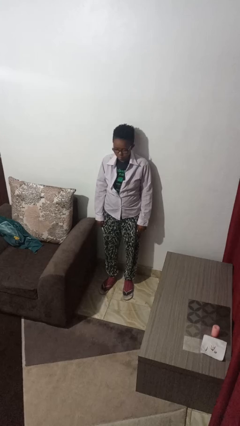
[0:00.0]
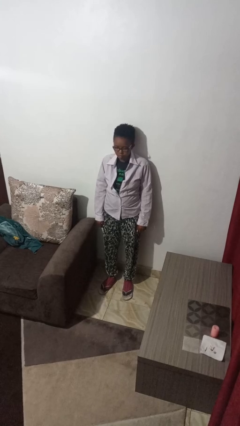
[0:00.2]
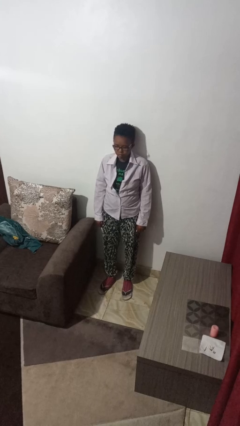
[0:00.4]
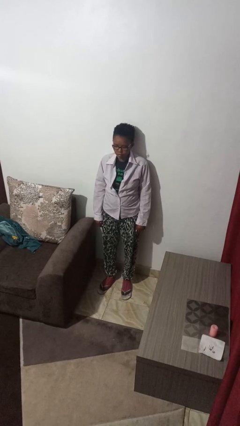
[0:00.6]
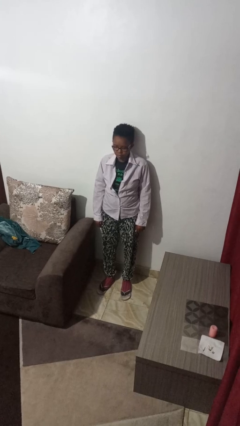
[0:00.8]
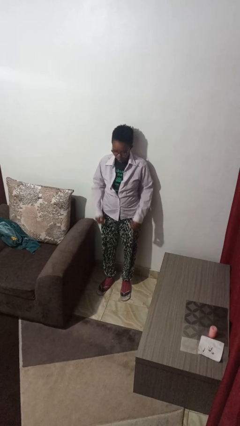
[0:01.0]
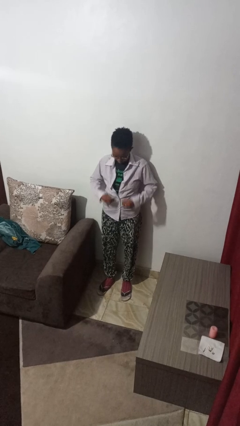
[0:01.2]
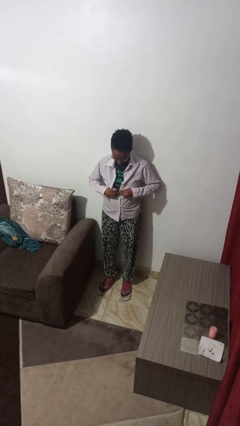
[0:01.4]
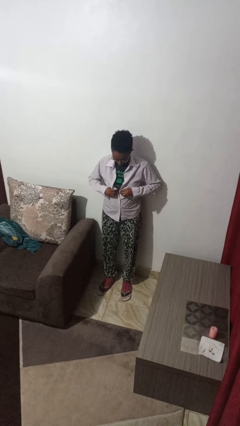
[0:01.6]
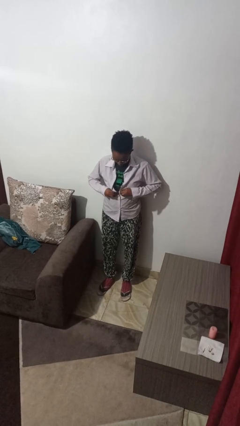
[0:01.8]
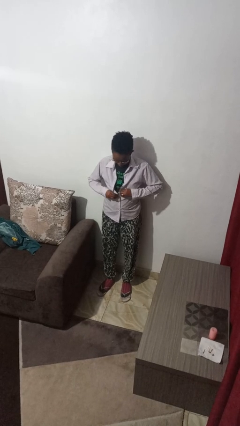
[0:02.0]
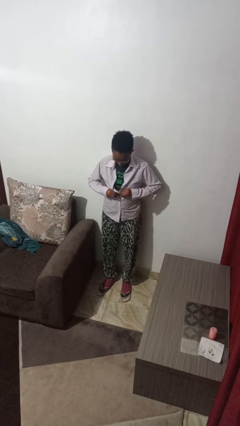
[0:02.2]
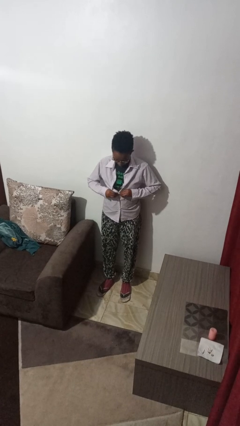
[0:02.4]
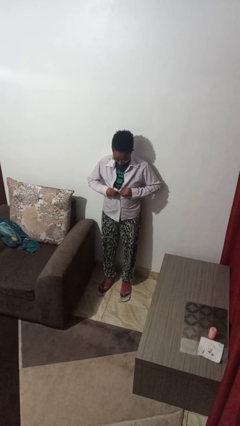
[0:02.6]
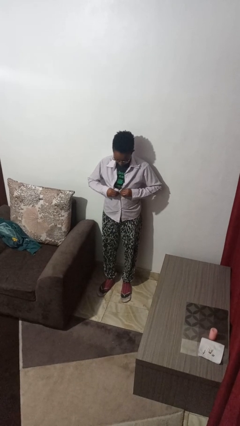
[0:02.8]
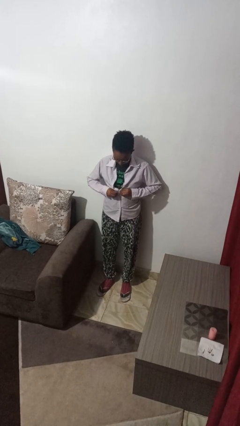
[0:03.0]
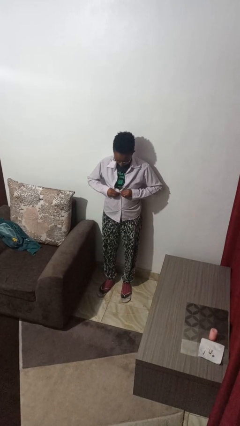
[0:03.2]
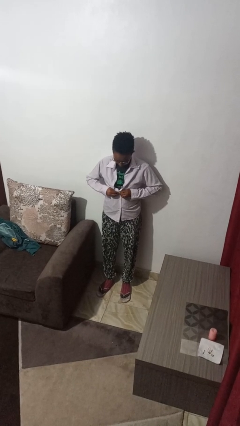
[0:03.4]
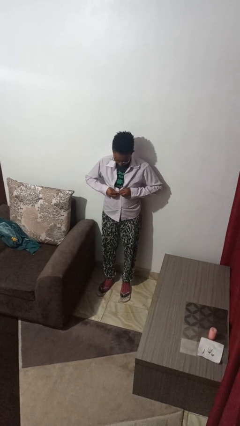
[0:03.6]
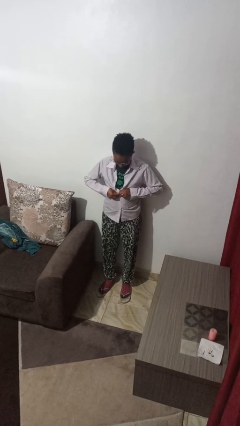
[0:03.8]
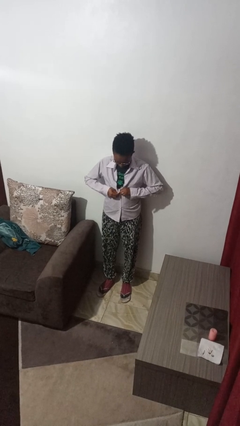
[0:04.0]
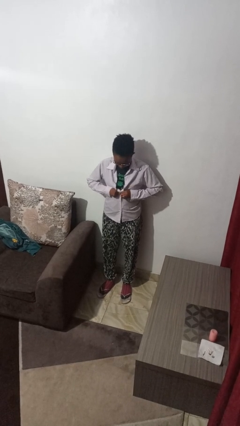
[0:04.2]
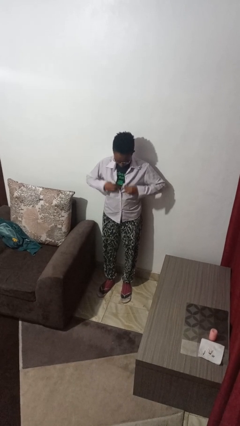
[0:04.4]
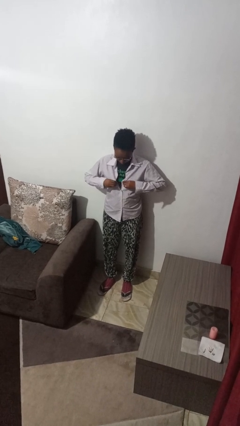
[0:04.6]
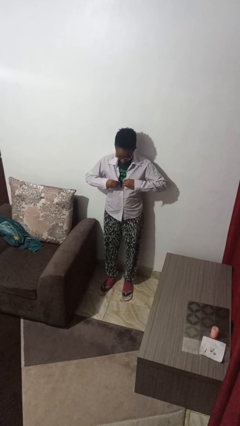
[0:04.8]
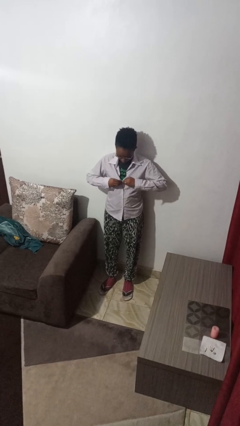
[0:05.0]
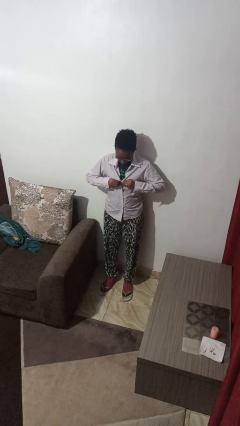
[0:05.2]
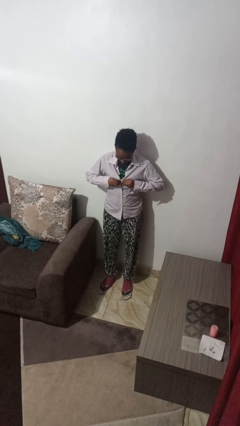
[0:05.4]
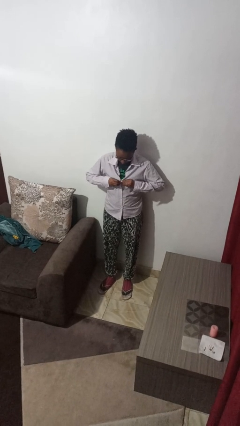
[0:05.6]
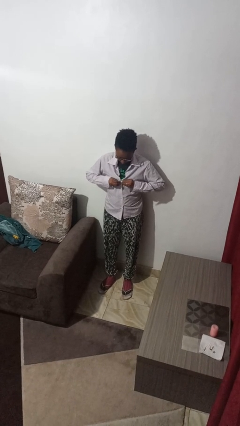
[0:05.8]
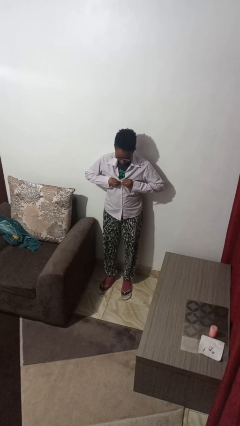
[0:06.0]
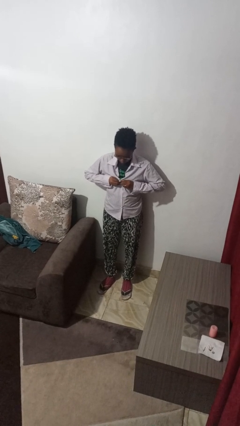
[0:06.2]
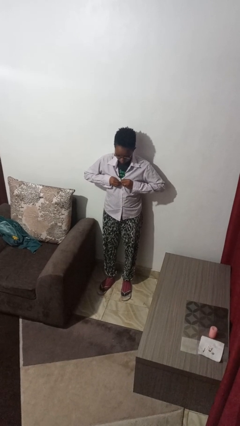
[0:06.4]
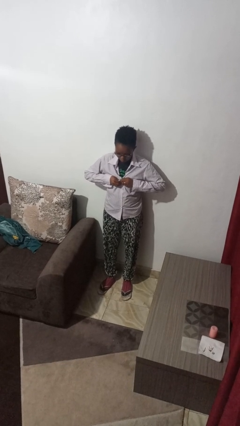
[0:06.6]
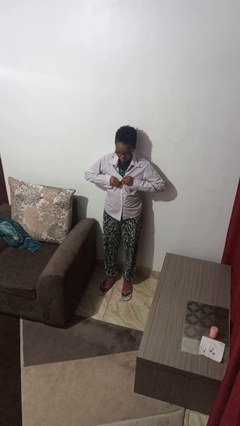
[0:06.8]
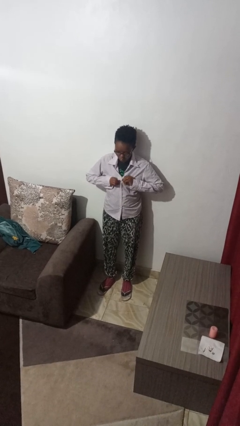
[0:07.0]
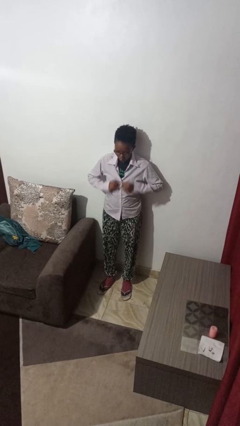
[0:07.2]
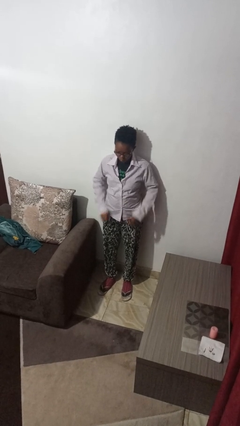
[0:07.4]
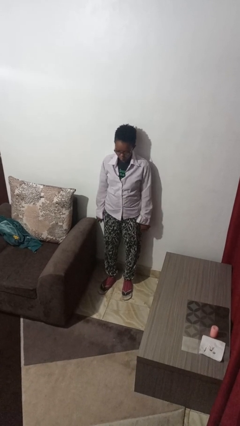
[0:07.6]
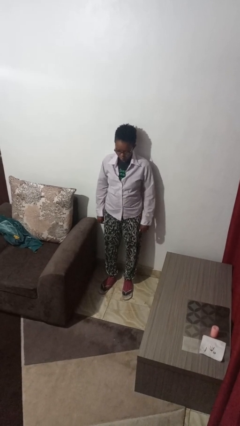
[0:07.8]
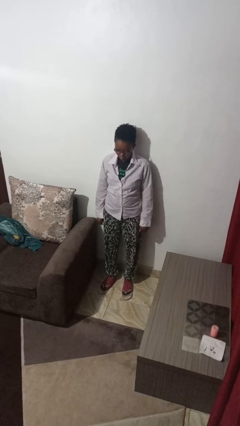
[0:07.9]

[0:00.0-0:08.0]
person buttons shirt

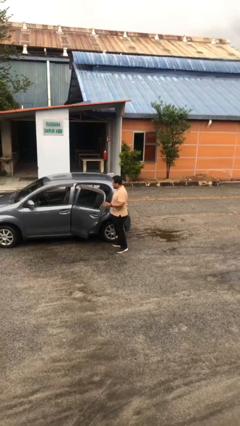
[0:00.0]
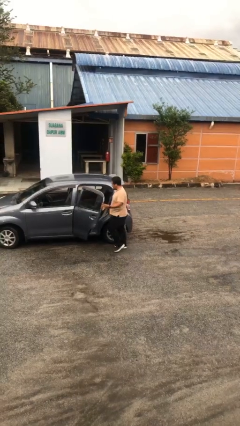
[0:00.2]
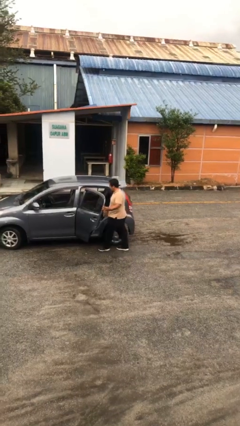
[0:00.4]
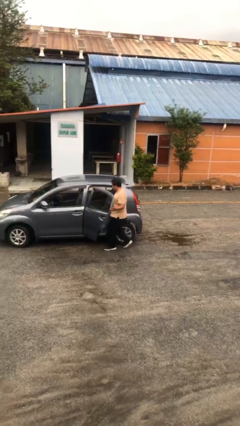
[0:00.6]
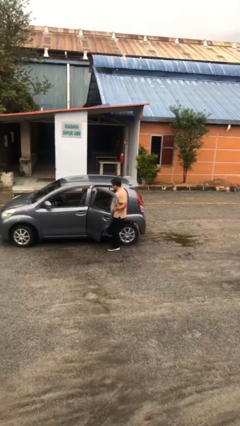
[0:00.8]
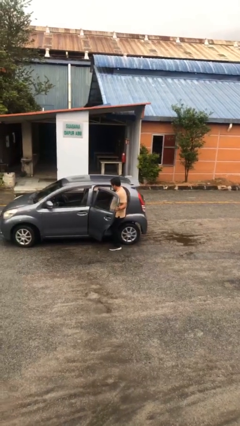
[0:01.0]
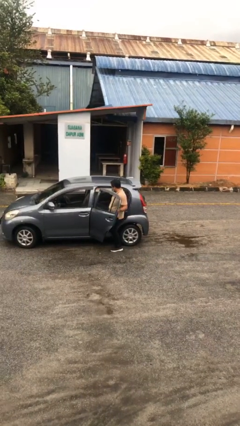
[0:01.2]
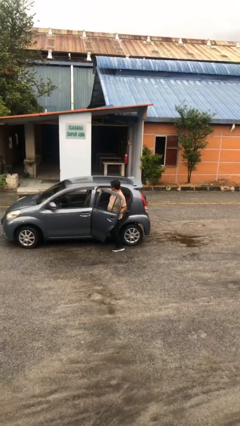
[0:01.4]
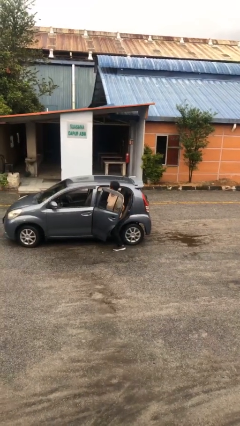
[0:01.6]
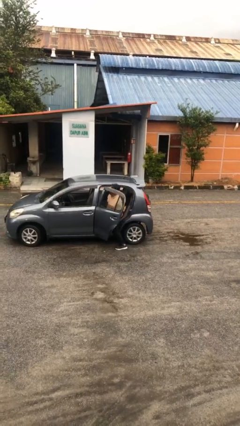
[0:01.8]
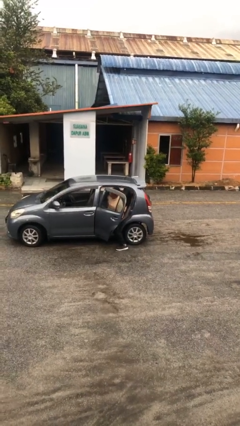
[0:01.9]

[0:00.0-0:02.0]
person enters car

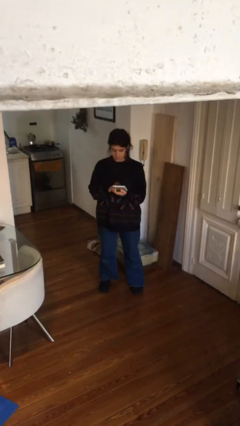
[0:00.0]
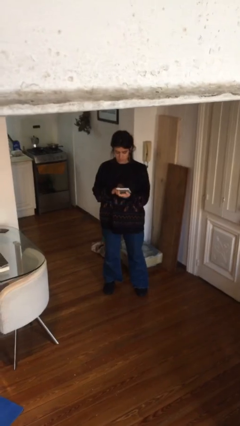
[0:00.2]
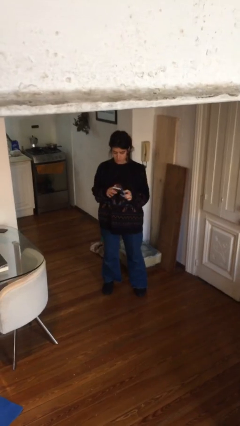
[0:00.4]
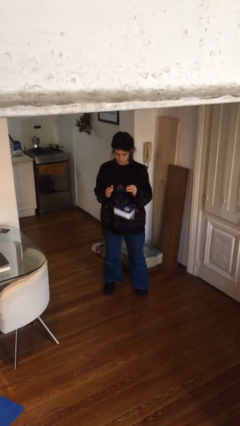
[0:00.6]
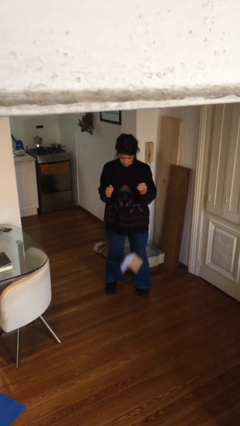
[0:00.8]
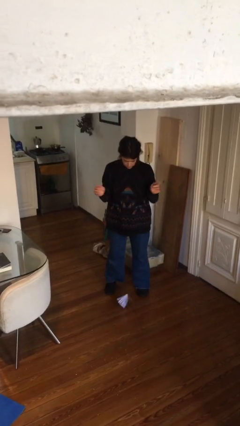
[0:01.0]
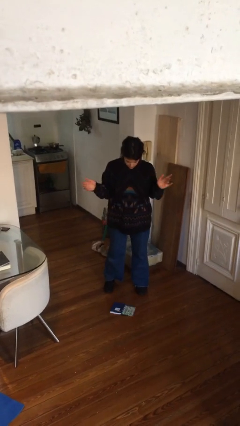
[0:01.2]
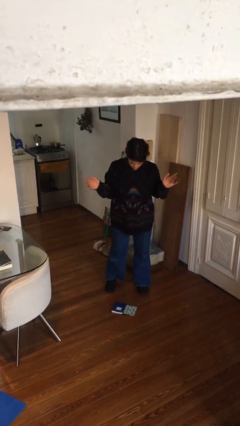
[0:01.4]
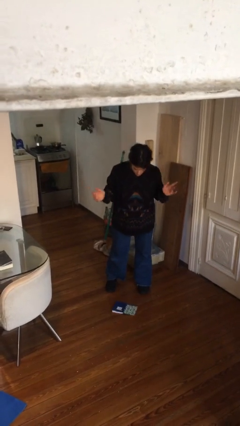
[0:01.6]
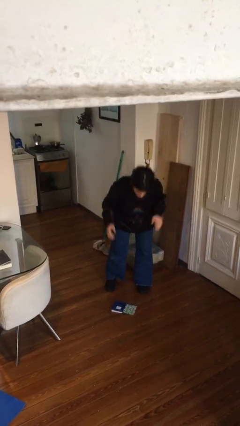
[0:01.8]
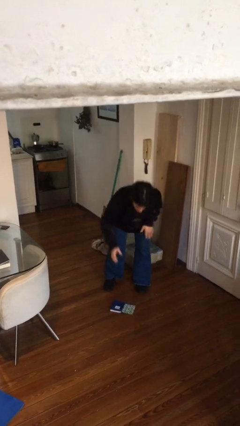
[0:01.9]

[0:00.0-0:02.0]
person drops object

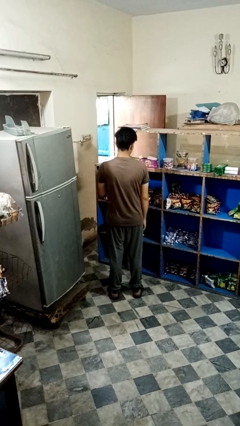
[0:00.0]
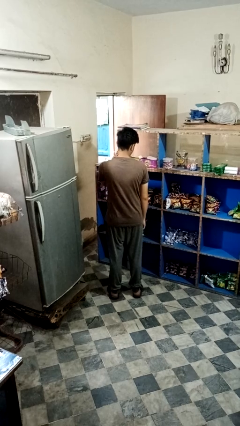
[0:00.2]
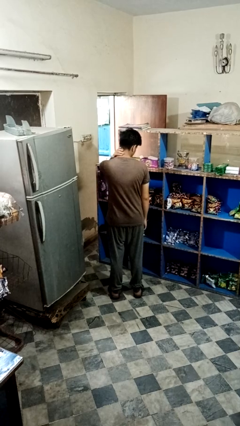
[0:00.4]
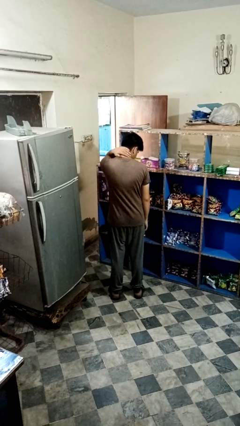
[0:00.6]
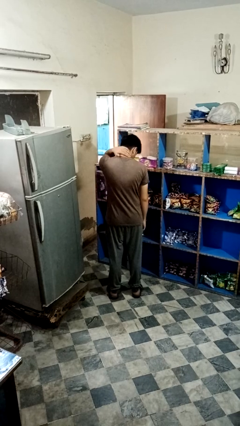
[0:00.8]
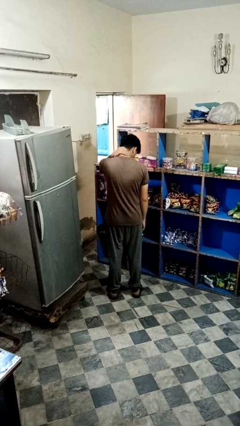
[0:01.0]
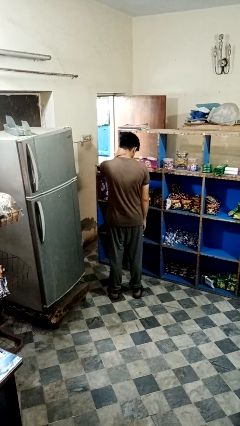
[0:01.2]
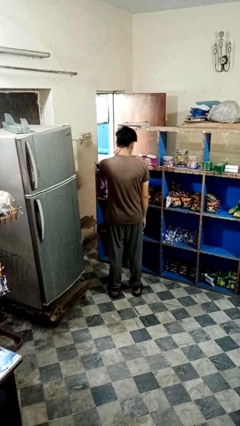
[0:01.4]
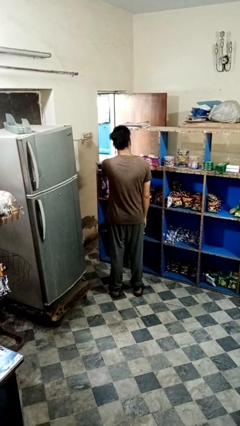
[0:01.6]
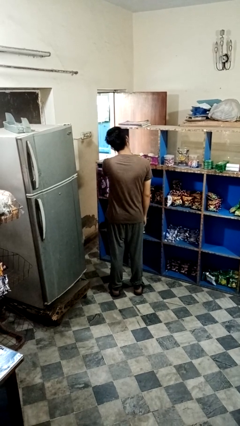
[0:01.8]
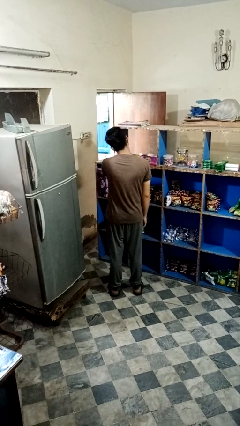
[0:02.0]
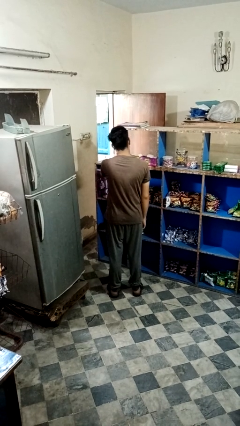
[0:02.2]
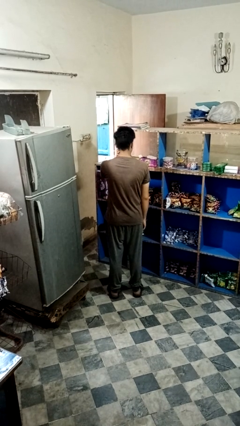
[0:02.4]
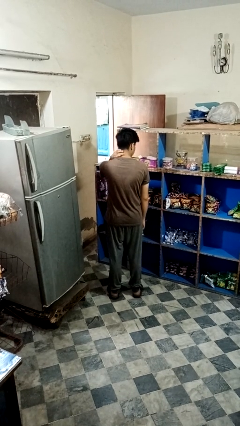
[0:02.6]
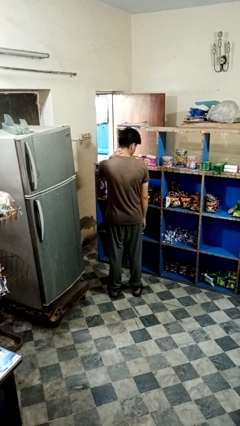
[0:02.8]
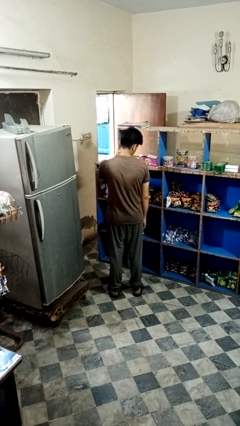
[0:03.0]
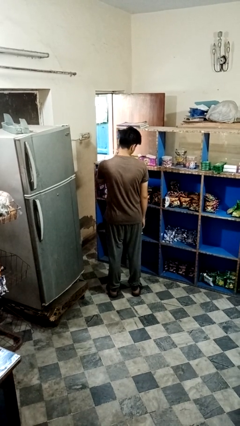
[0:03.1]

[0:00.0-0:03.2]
person rubs neck

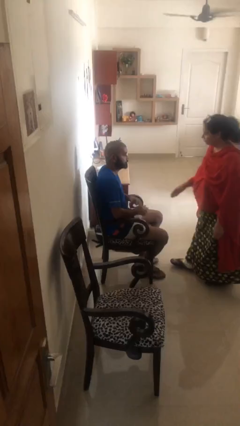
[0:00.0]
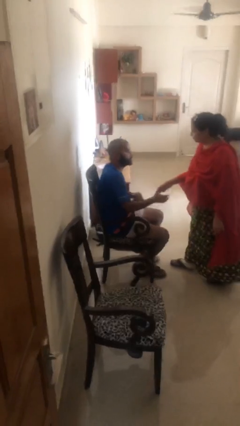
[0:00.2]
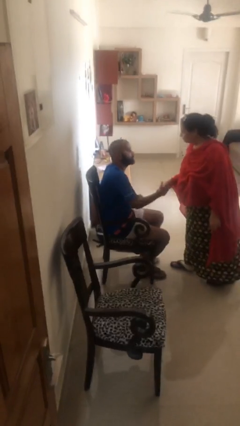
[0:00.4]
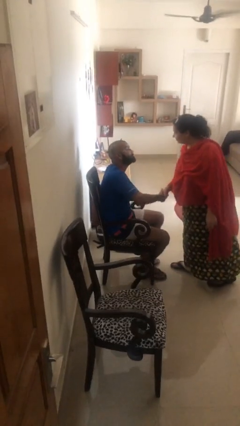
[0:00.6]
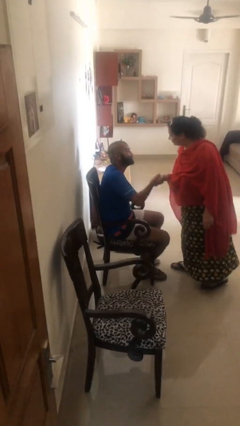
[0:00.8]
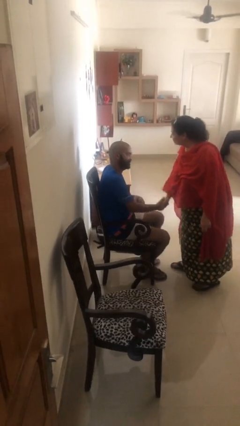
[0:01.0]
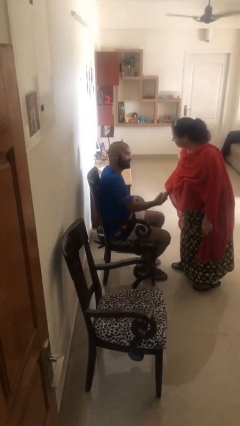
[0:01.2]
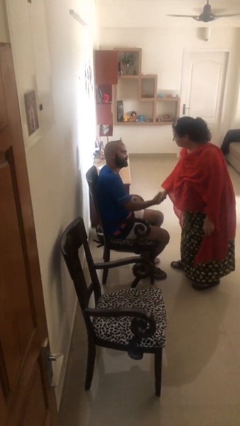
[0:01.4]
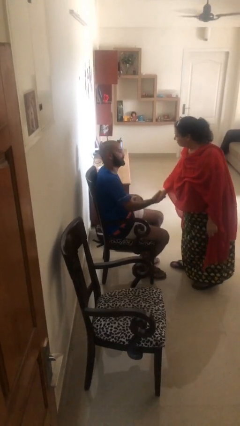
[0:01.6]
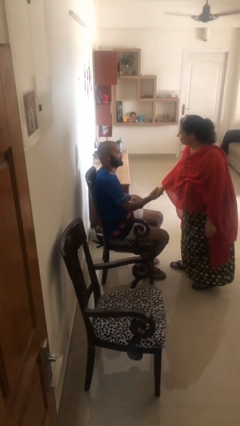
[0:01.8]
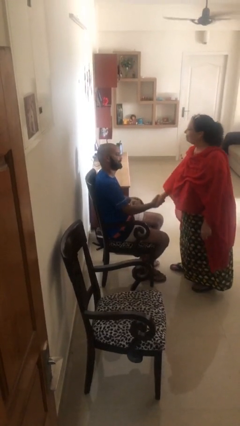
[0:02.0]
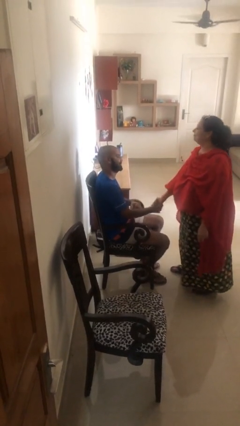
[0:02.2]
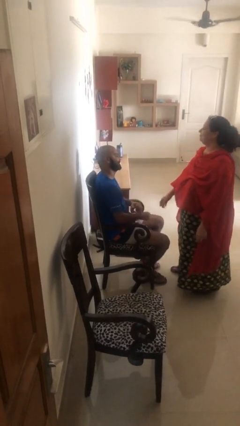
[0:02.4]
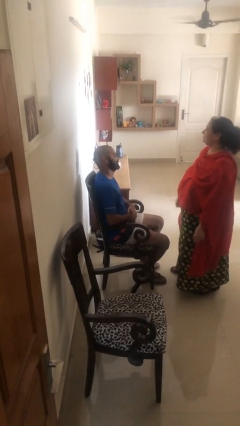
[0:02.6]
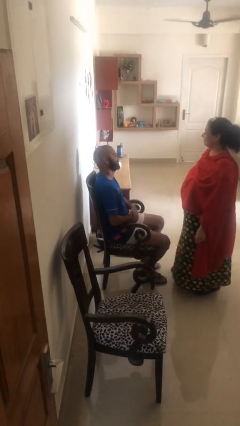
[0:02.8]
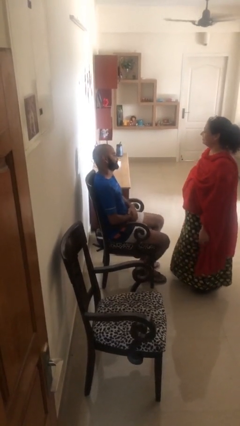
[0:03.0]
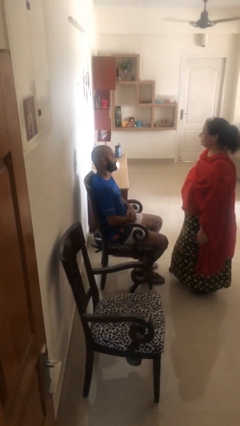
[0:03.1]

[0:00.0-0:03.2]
person shakes hand
